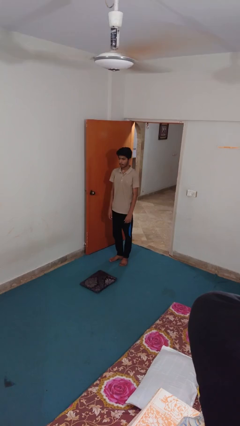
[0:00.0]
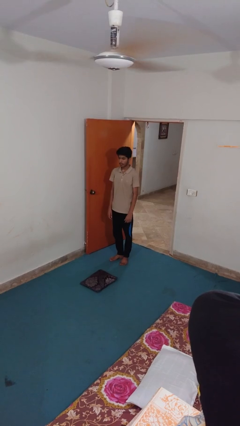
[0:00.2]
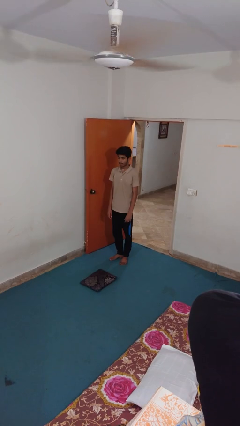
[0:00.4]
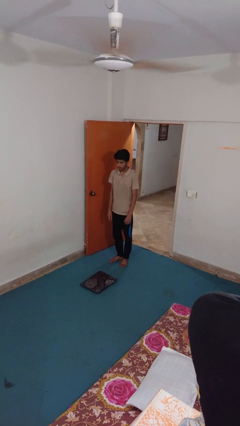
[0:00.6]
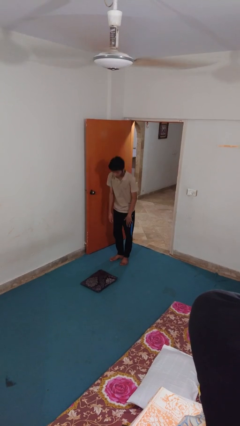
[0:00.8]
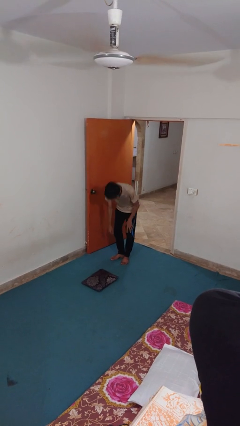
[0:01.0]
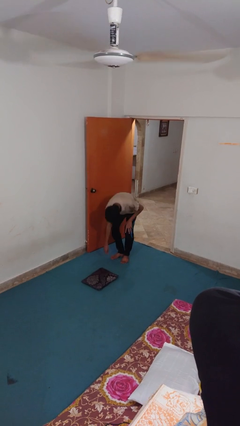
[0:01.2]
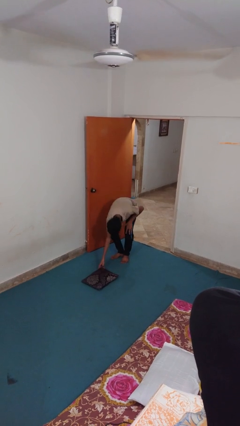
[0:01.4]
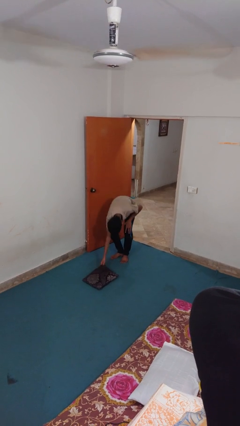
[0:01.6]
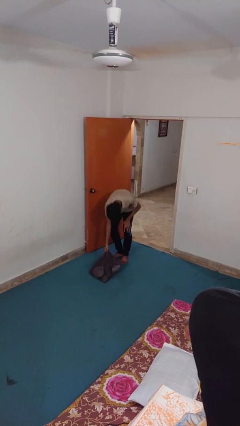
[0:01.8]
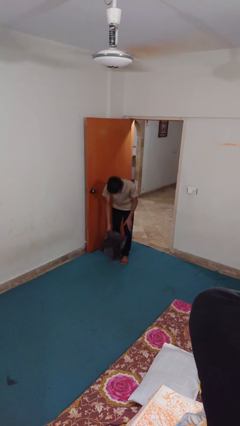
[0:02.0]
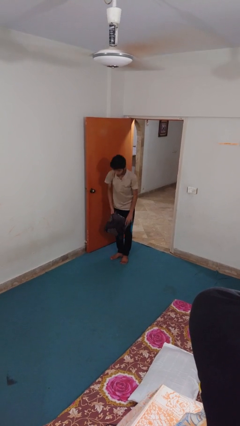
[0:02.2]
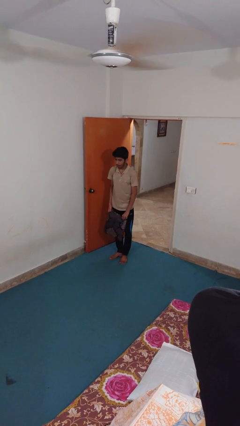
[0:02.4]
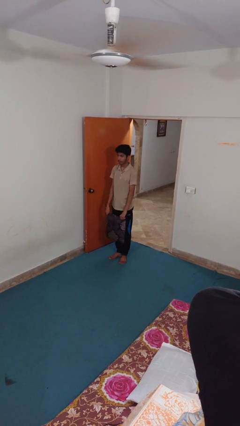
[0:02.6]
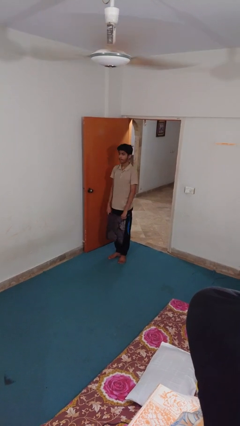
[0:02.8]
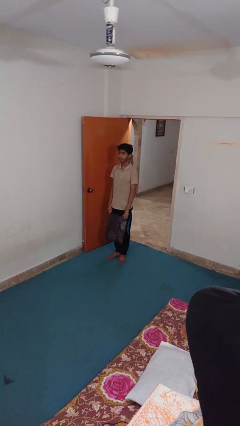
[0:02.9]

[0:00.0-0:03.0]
person picks up object from floor

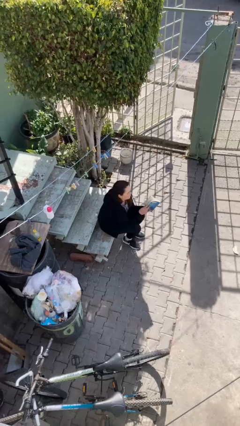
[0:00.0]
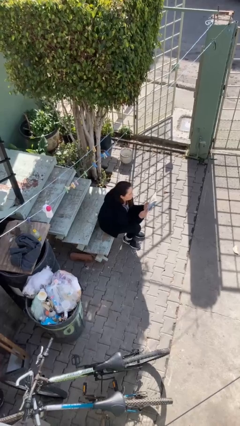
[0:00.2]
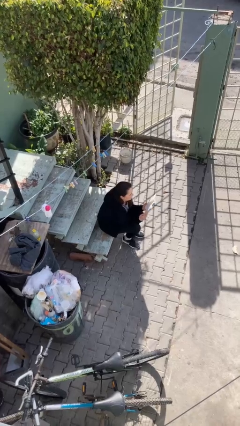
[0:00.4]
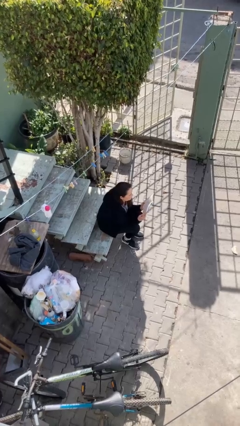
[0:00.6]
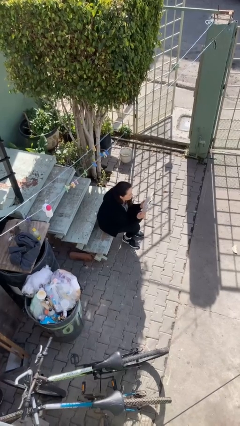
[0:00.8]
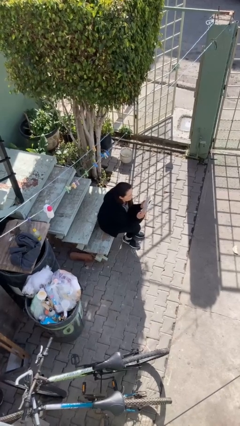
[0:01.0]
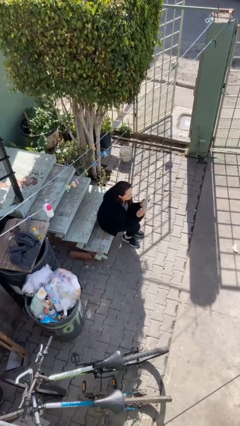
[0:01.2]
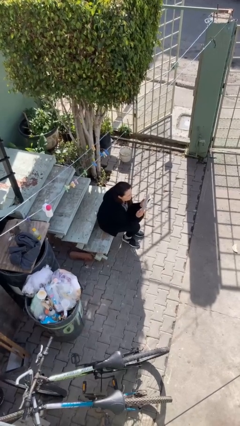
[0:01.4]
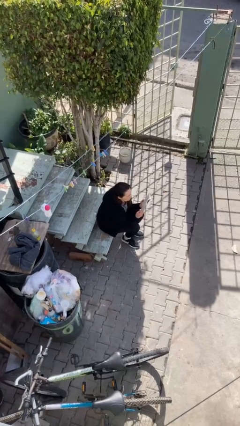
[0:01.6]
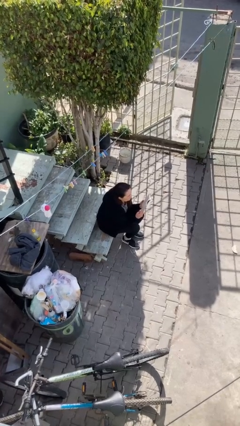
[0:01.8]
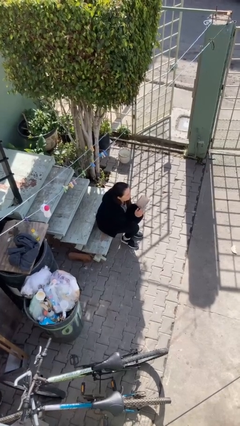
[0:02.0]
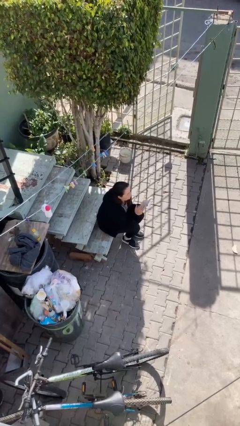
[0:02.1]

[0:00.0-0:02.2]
person reads document

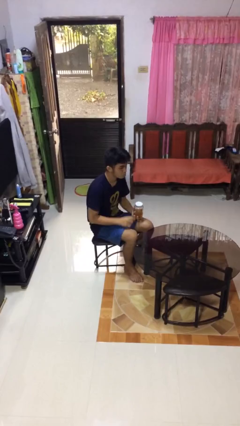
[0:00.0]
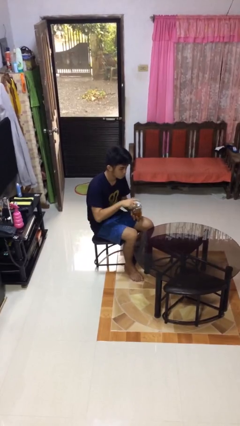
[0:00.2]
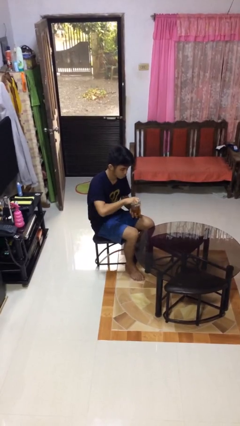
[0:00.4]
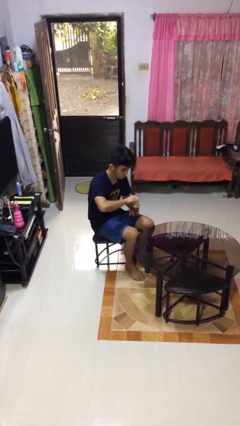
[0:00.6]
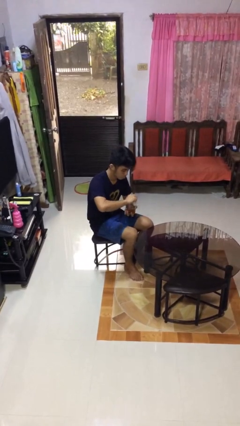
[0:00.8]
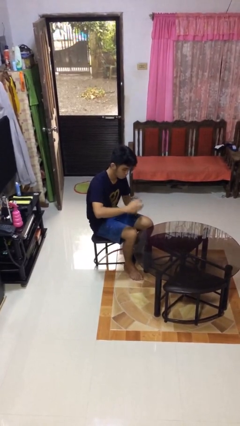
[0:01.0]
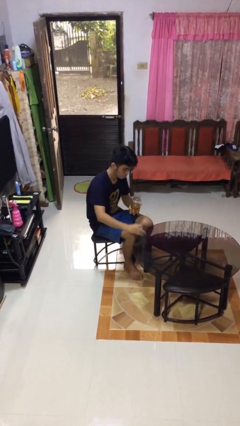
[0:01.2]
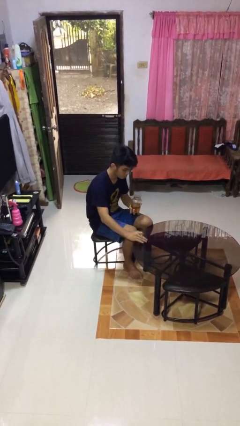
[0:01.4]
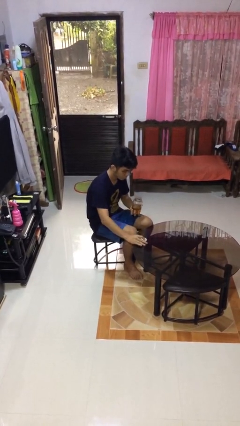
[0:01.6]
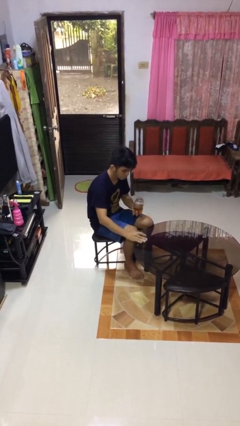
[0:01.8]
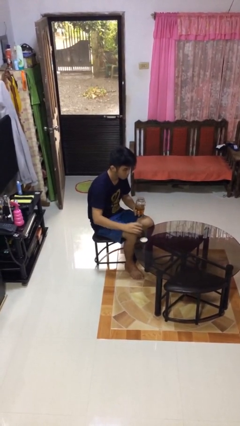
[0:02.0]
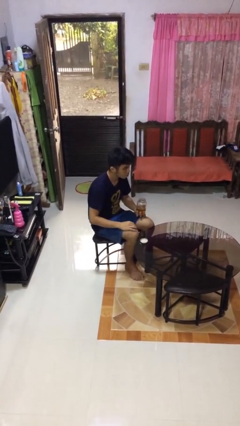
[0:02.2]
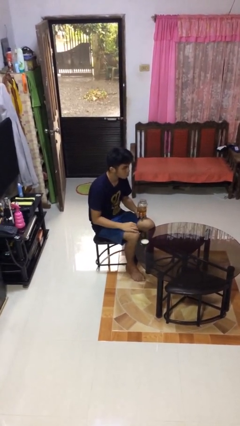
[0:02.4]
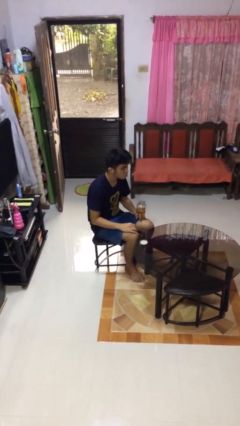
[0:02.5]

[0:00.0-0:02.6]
person opens jar

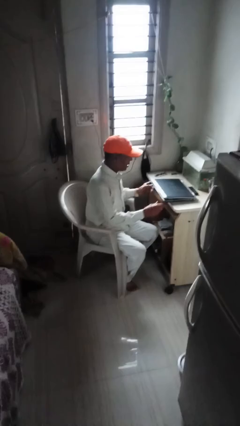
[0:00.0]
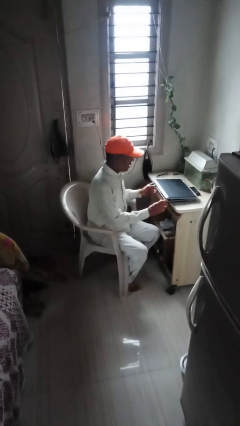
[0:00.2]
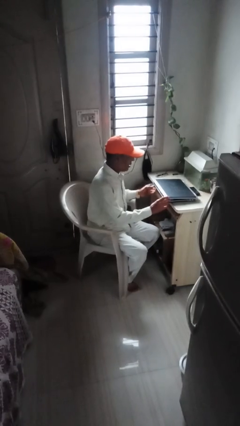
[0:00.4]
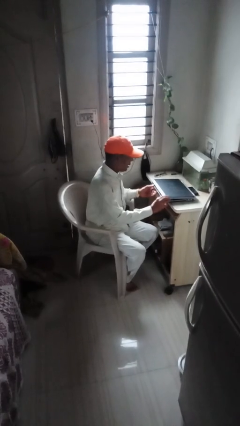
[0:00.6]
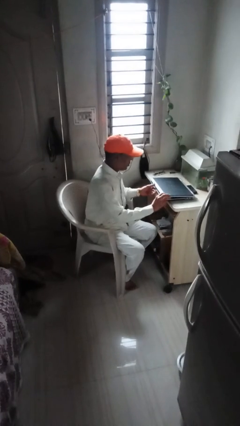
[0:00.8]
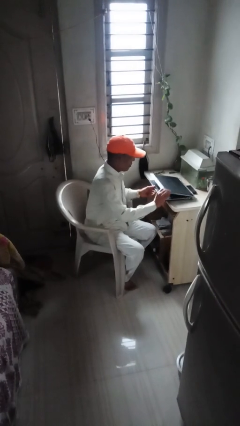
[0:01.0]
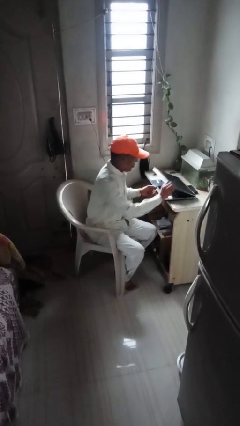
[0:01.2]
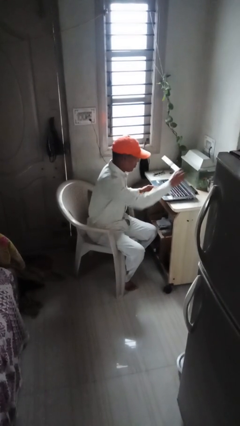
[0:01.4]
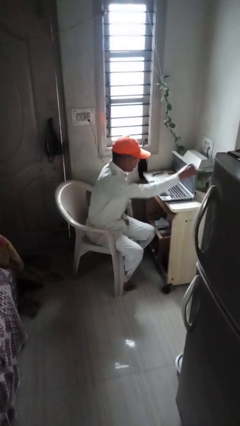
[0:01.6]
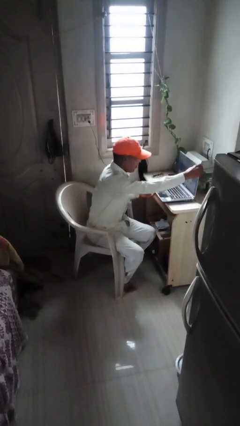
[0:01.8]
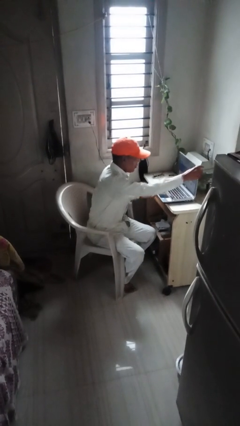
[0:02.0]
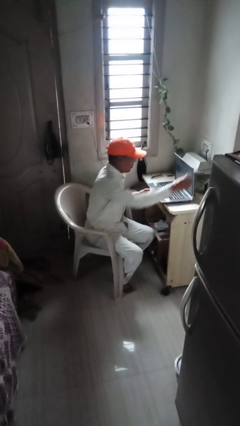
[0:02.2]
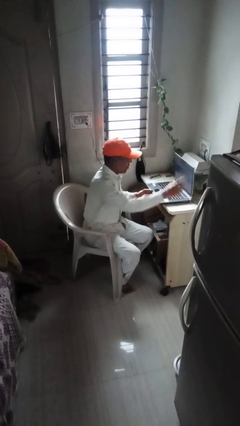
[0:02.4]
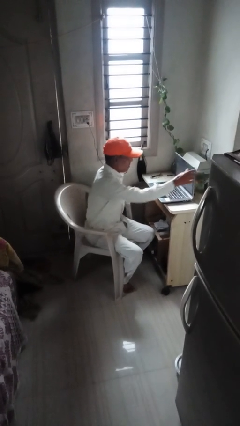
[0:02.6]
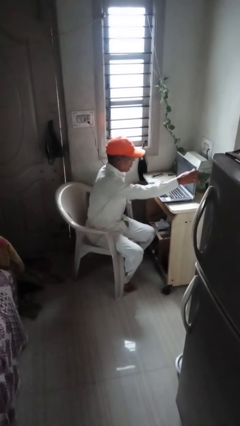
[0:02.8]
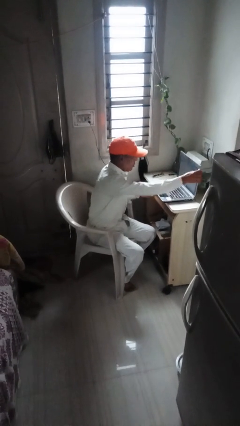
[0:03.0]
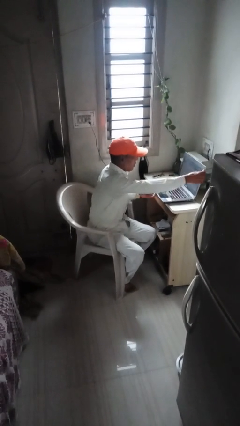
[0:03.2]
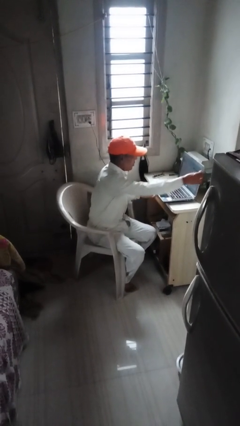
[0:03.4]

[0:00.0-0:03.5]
person opens laptop

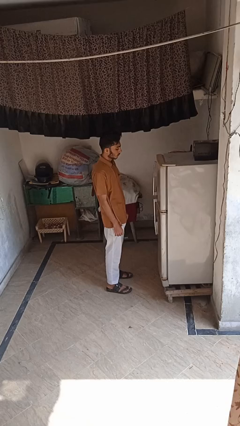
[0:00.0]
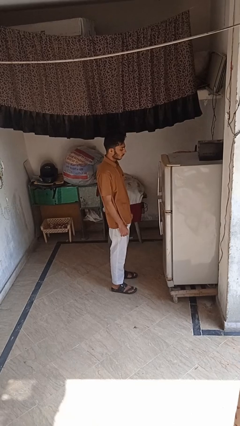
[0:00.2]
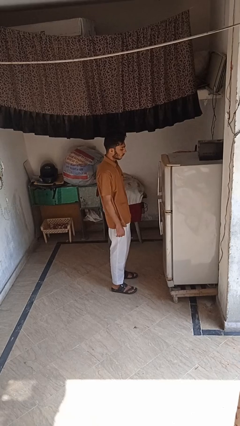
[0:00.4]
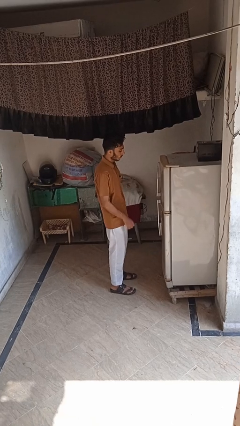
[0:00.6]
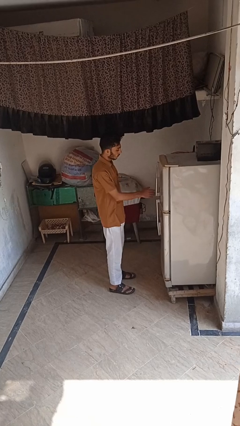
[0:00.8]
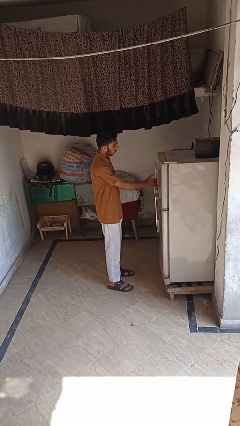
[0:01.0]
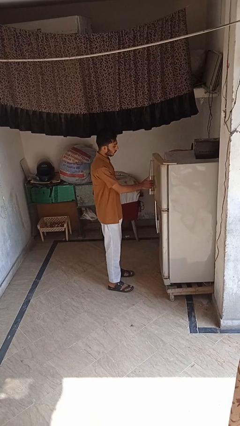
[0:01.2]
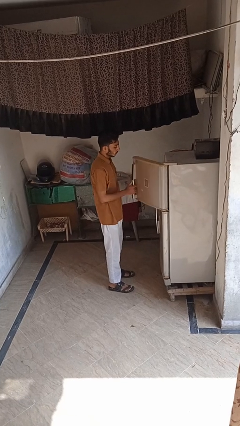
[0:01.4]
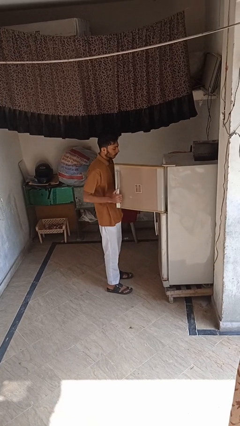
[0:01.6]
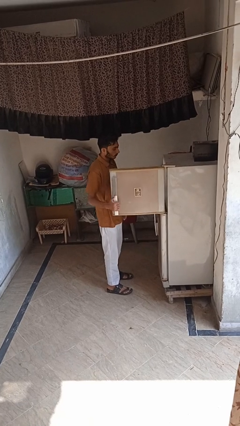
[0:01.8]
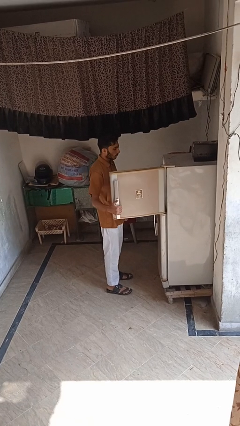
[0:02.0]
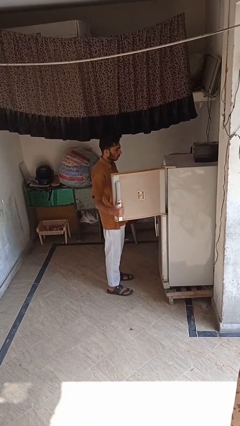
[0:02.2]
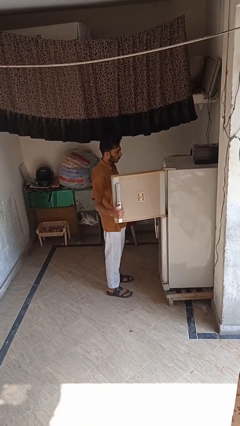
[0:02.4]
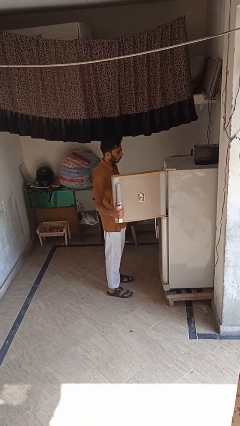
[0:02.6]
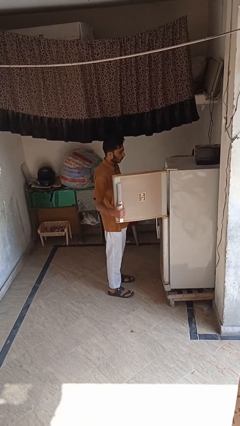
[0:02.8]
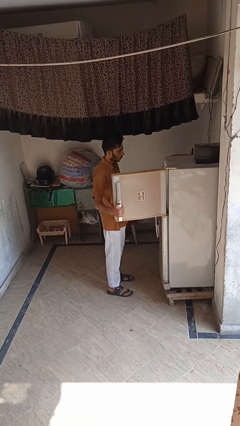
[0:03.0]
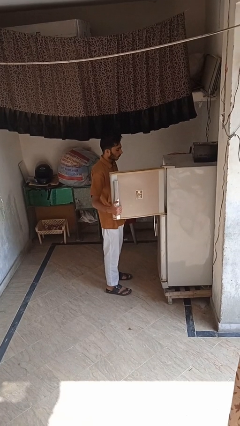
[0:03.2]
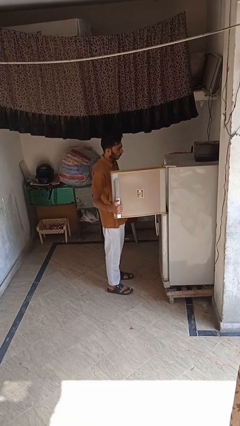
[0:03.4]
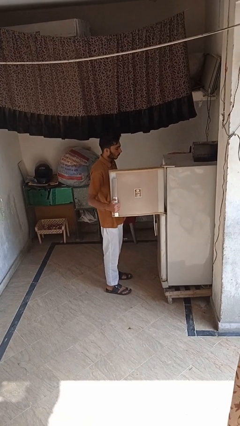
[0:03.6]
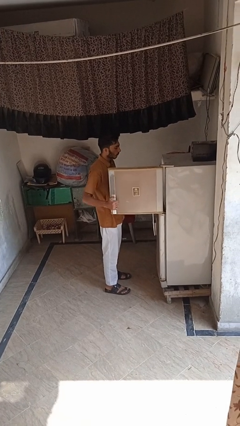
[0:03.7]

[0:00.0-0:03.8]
person opens refrigerator

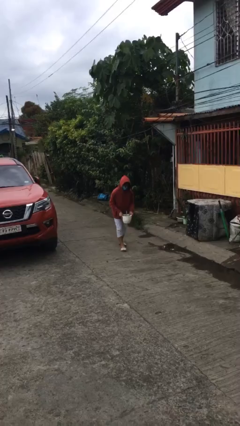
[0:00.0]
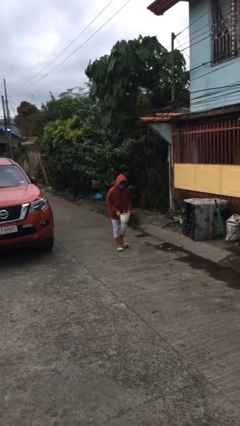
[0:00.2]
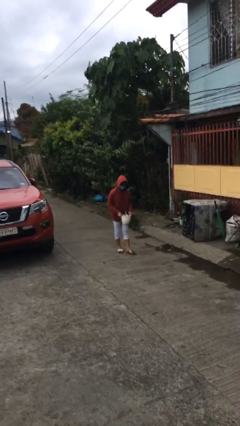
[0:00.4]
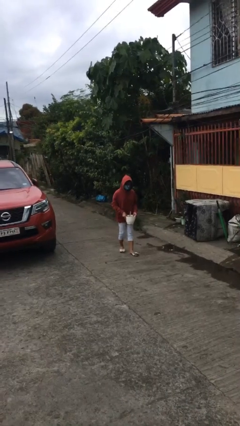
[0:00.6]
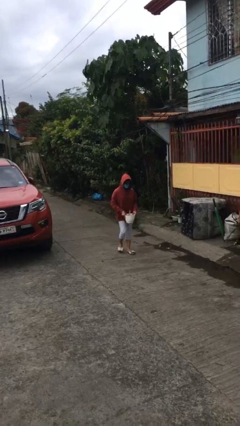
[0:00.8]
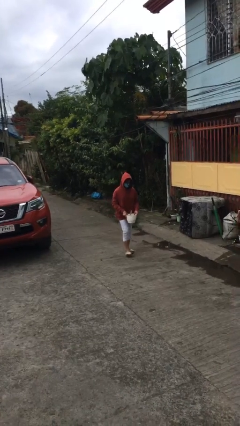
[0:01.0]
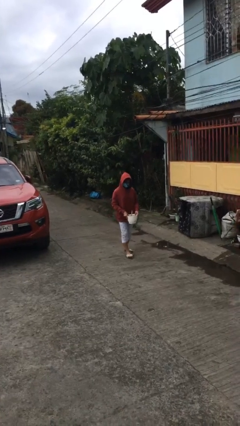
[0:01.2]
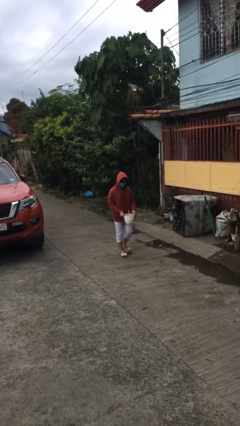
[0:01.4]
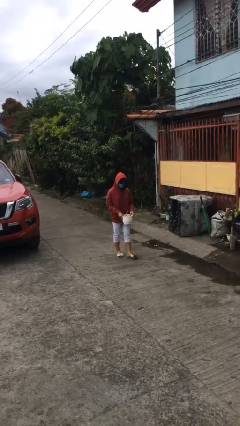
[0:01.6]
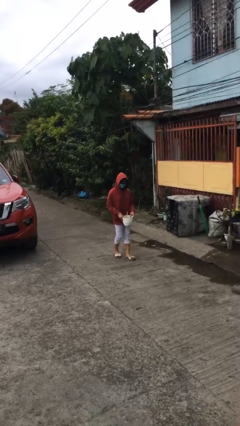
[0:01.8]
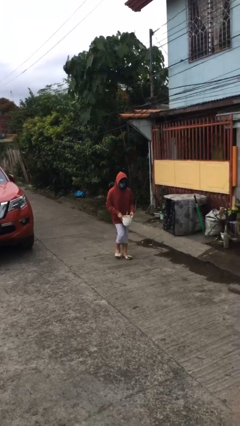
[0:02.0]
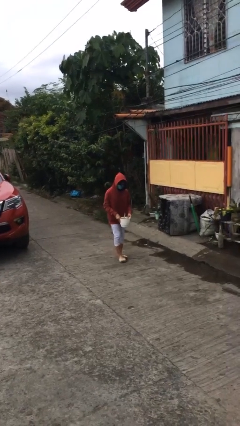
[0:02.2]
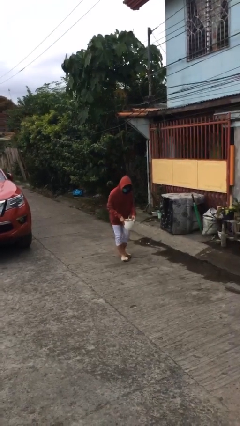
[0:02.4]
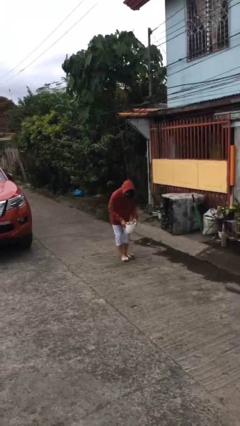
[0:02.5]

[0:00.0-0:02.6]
person carries heavy object
